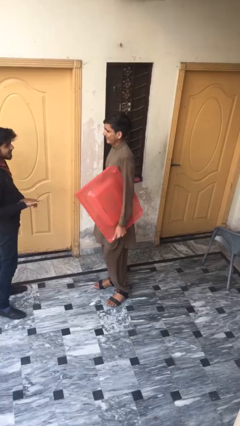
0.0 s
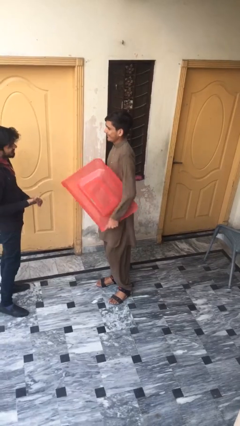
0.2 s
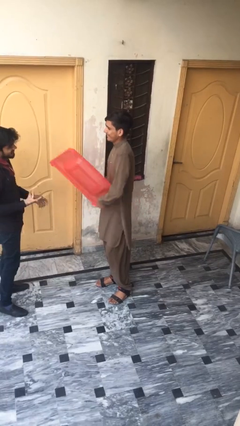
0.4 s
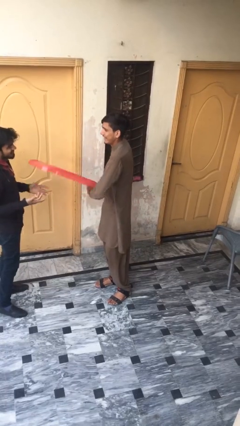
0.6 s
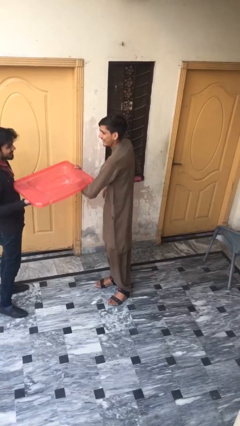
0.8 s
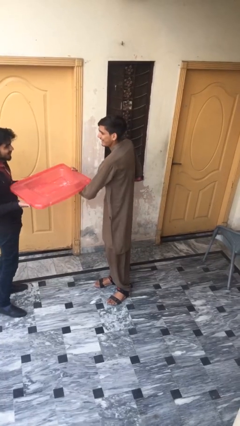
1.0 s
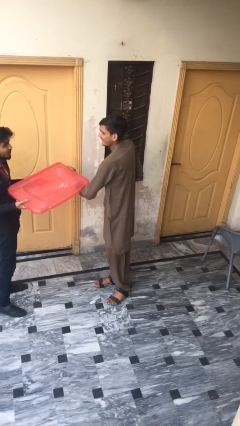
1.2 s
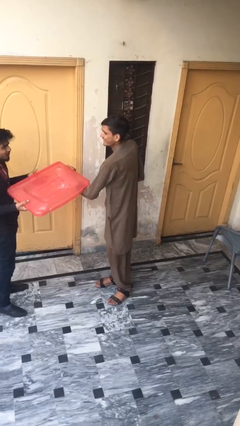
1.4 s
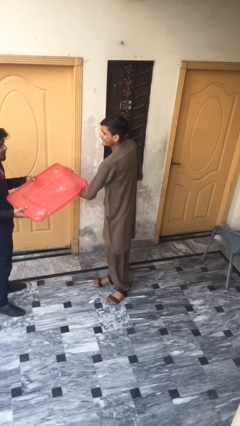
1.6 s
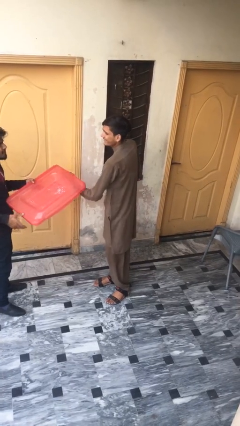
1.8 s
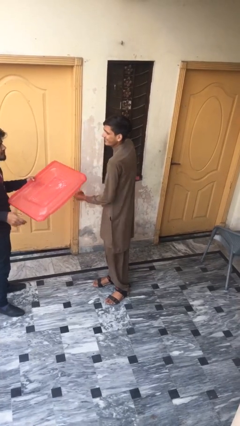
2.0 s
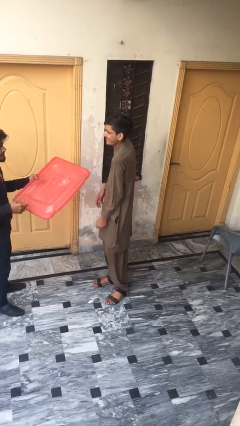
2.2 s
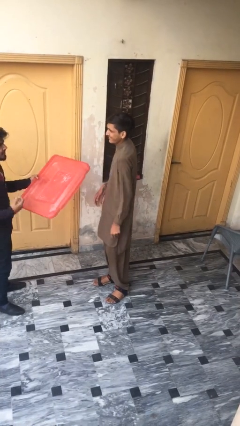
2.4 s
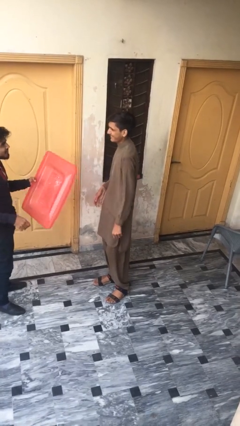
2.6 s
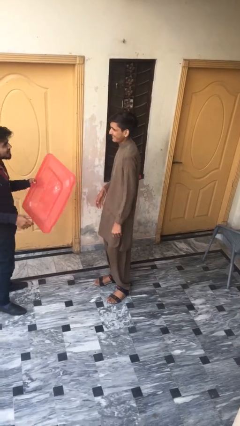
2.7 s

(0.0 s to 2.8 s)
person transfers object to person

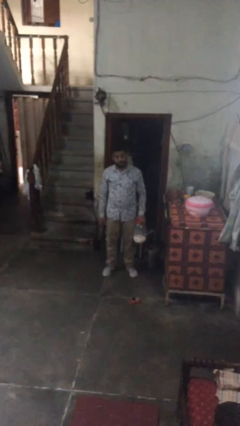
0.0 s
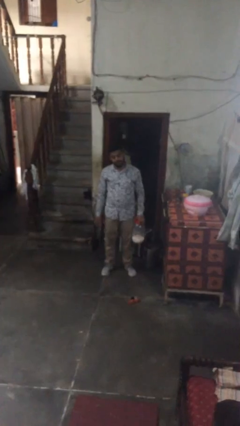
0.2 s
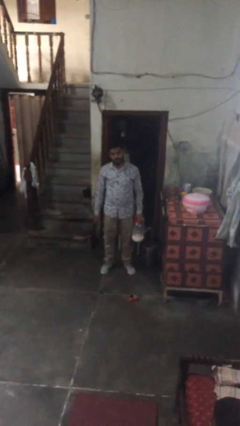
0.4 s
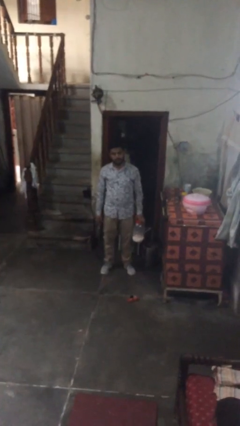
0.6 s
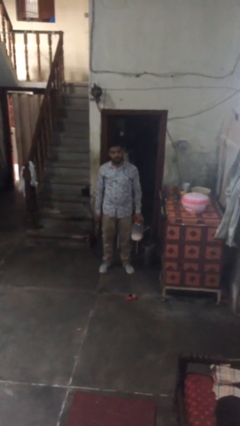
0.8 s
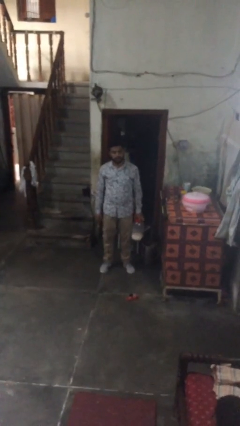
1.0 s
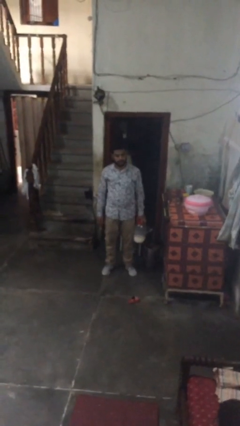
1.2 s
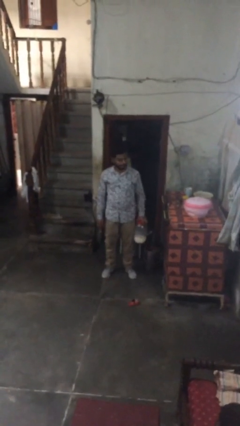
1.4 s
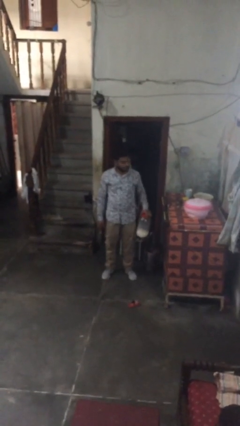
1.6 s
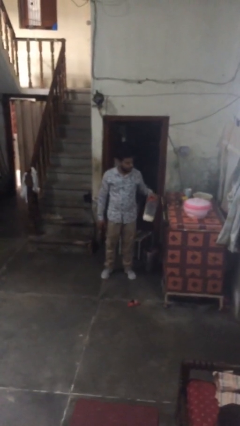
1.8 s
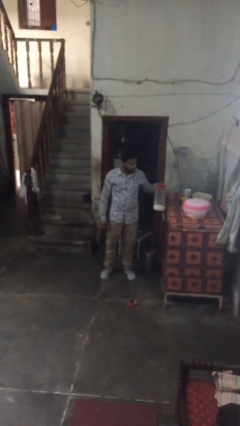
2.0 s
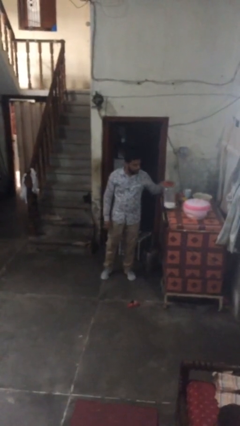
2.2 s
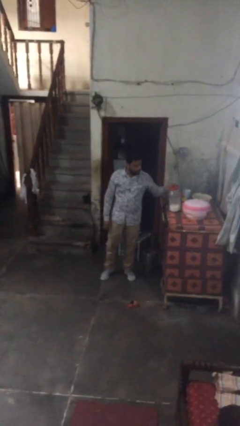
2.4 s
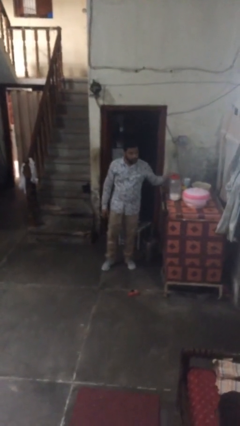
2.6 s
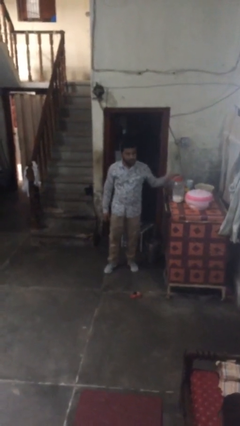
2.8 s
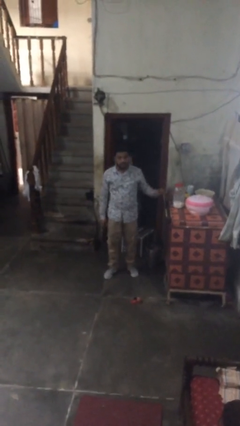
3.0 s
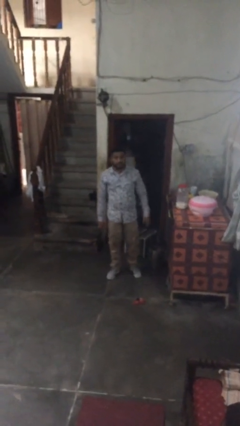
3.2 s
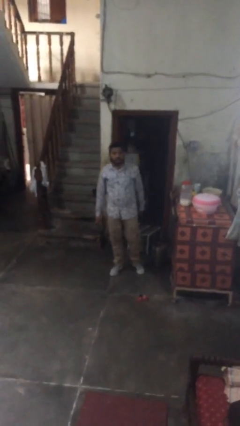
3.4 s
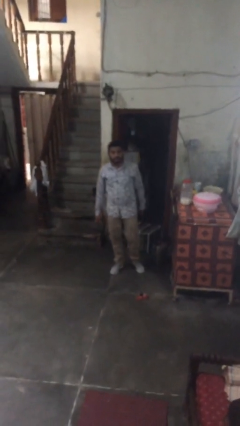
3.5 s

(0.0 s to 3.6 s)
person puts down object on table

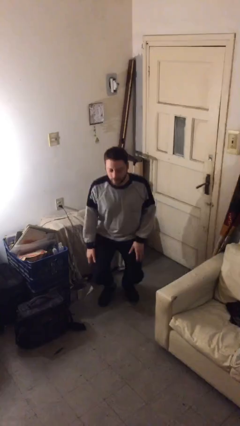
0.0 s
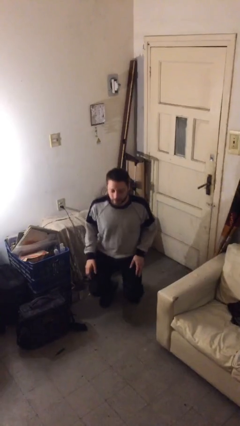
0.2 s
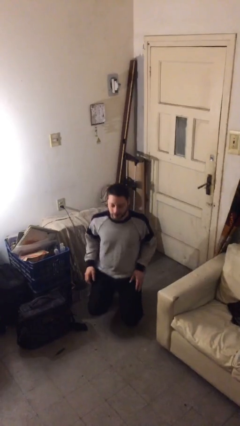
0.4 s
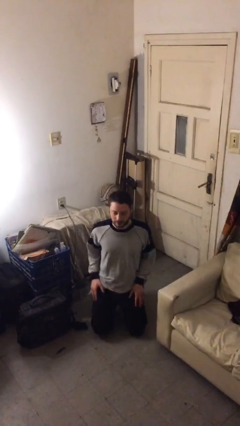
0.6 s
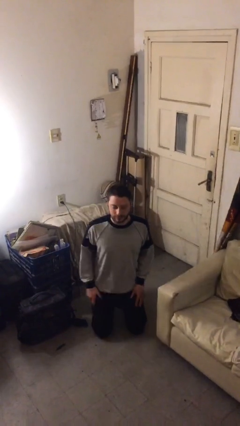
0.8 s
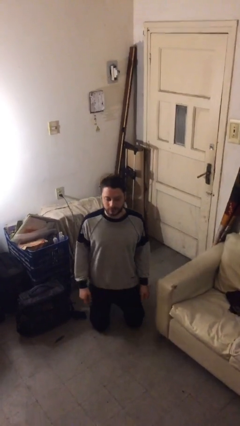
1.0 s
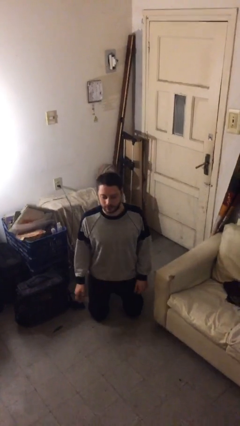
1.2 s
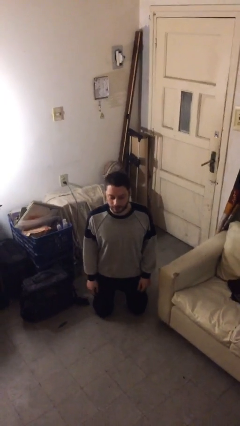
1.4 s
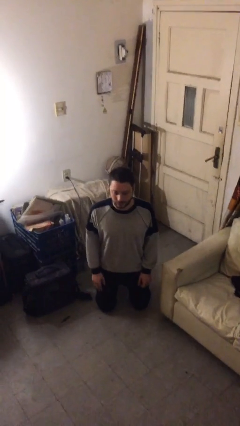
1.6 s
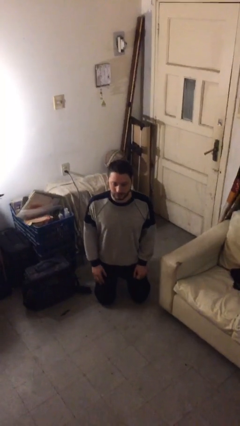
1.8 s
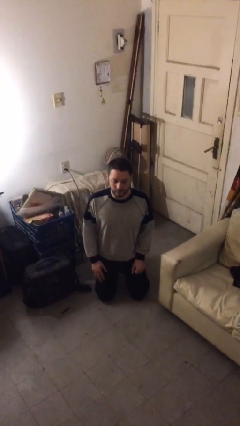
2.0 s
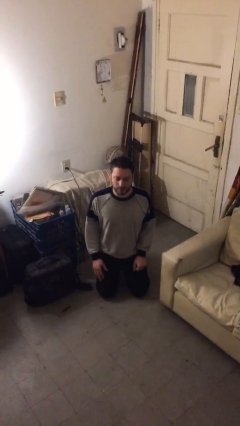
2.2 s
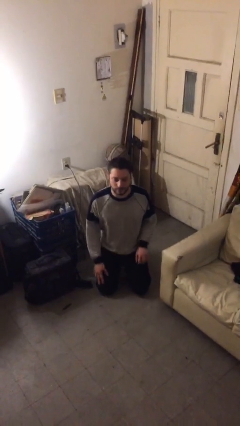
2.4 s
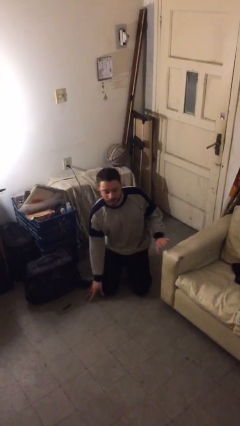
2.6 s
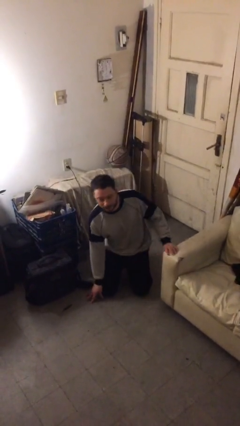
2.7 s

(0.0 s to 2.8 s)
person crawls

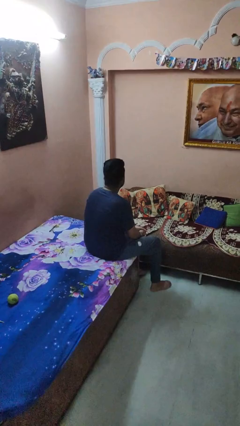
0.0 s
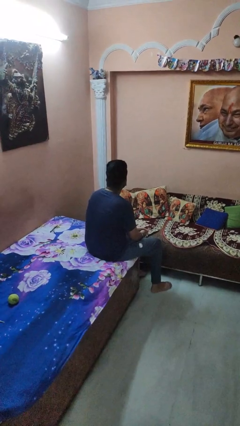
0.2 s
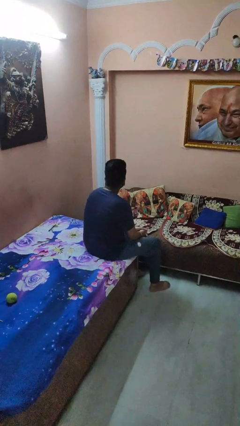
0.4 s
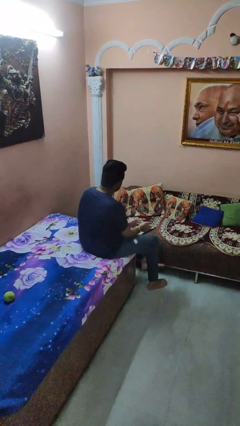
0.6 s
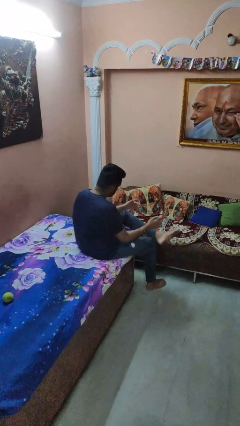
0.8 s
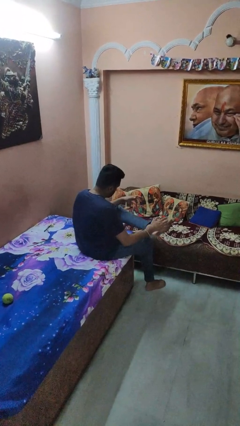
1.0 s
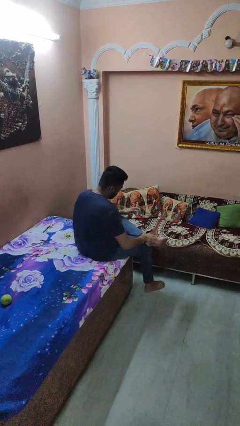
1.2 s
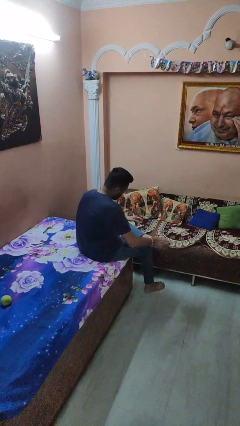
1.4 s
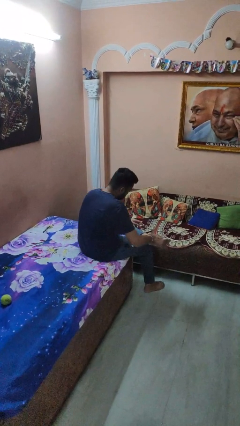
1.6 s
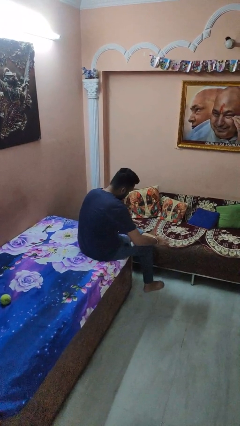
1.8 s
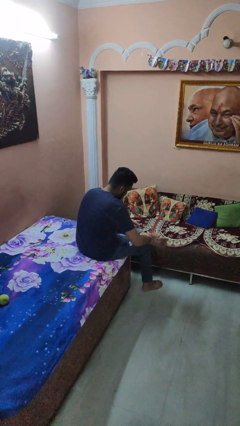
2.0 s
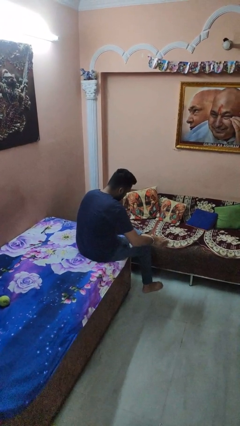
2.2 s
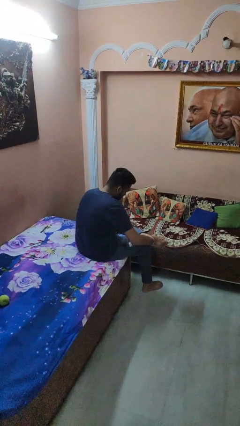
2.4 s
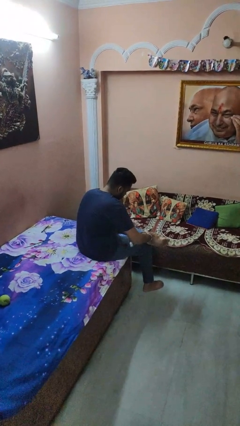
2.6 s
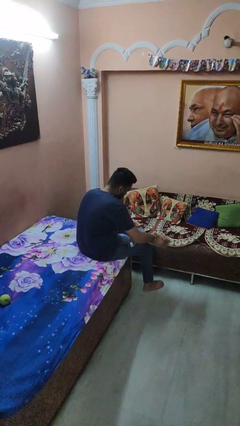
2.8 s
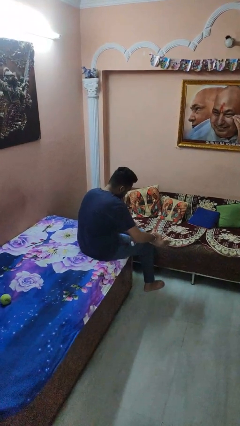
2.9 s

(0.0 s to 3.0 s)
person rubs foot

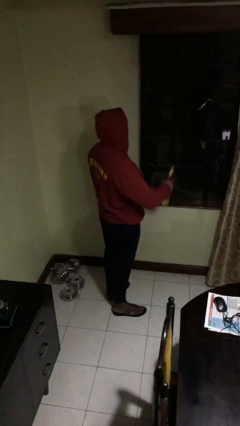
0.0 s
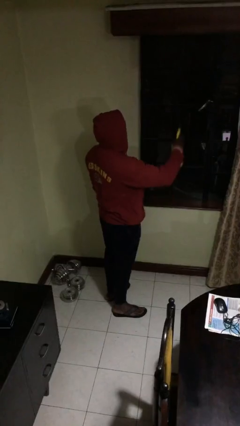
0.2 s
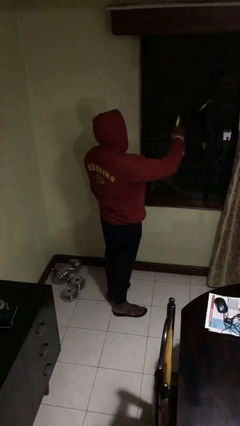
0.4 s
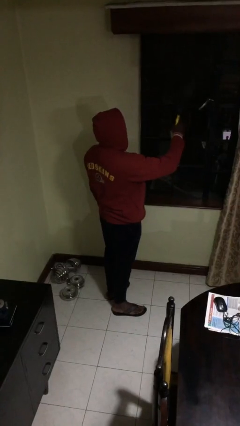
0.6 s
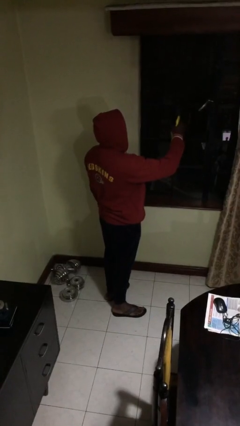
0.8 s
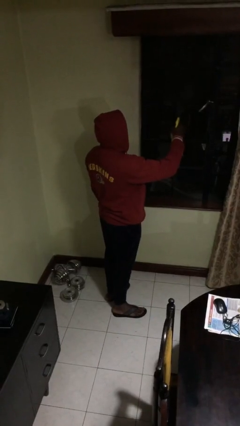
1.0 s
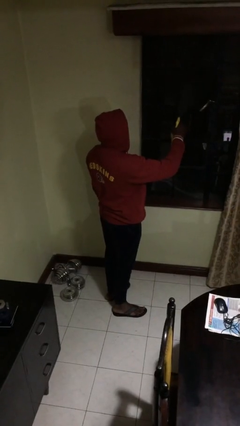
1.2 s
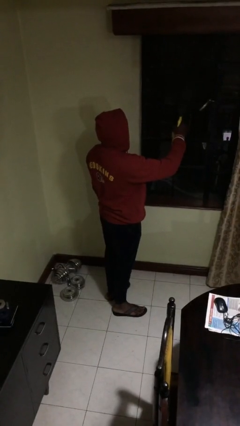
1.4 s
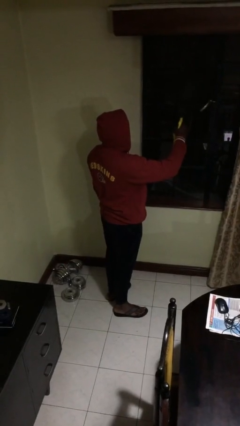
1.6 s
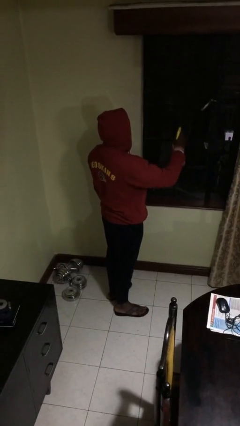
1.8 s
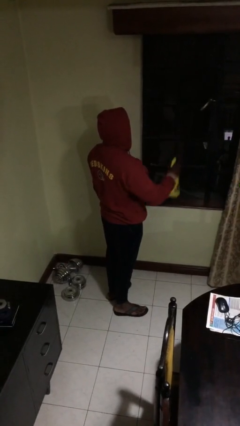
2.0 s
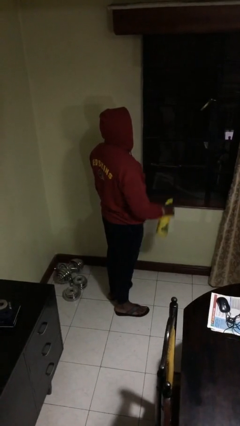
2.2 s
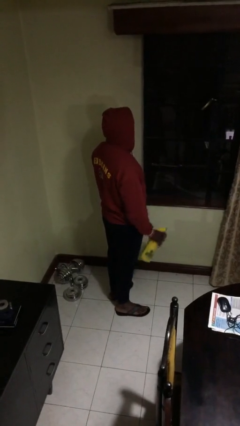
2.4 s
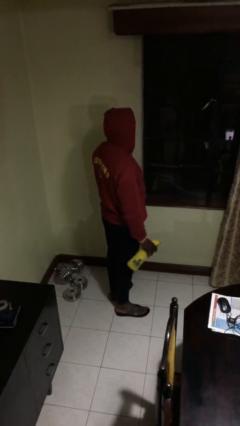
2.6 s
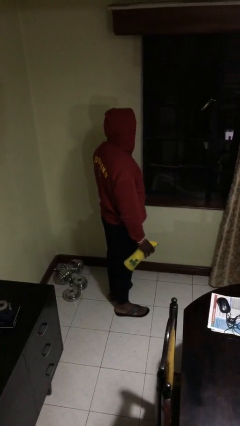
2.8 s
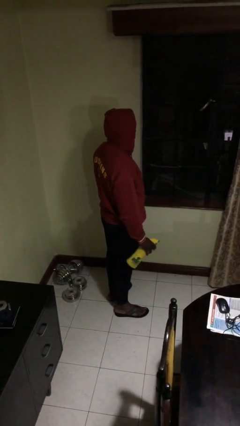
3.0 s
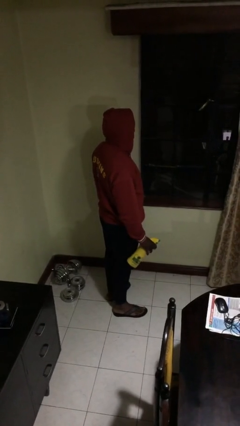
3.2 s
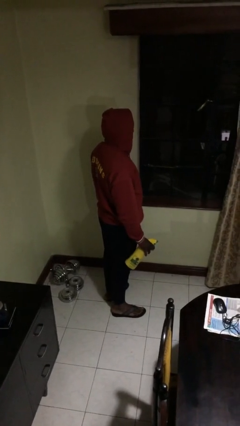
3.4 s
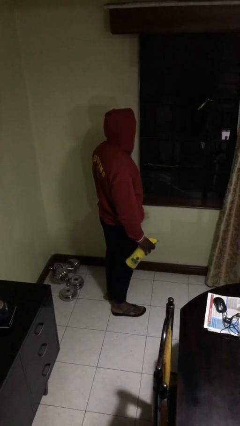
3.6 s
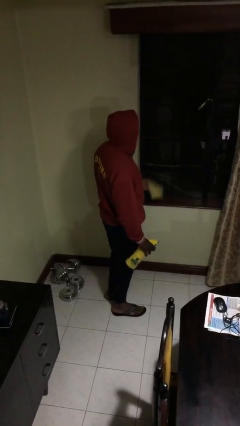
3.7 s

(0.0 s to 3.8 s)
person sprays from bottle

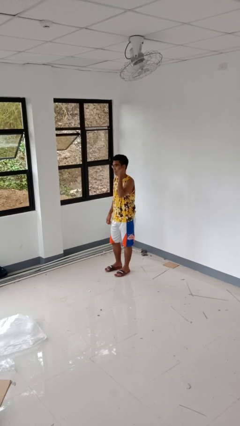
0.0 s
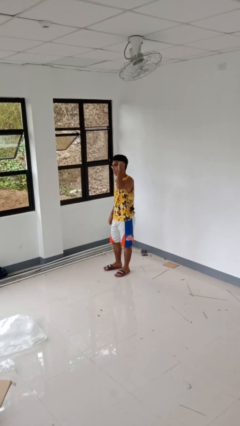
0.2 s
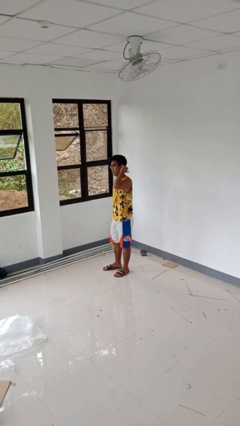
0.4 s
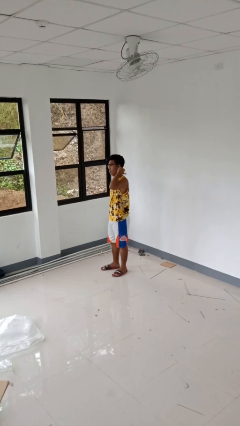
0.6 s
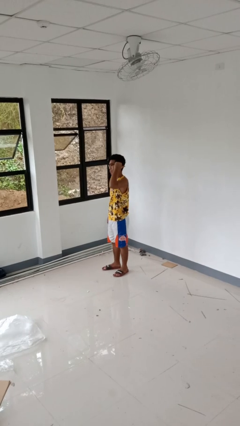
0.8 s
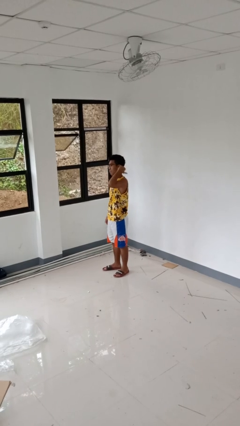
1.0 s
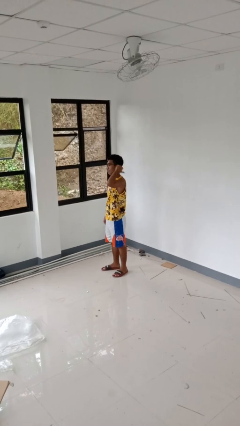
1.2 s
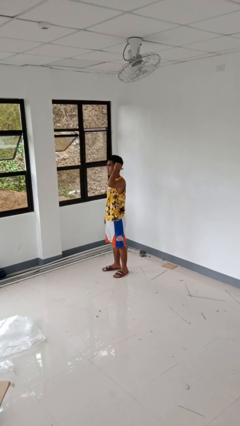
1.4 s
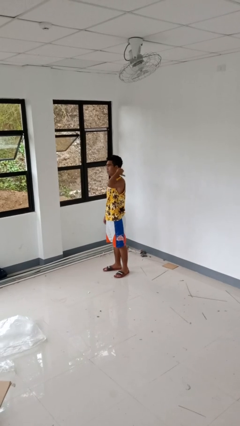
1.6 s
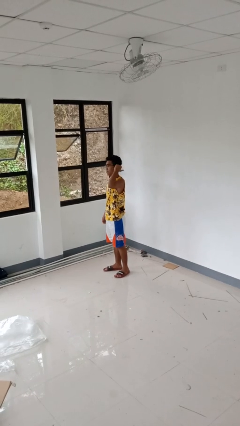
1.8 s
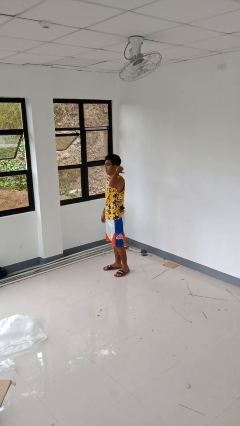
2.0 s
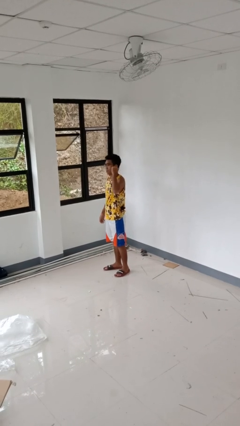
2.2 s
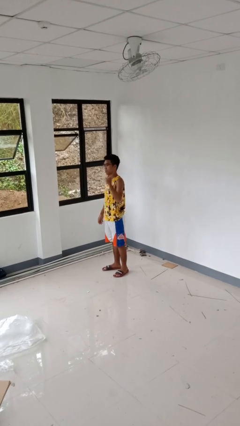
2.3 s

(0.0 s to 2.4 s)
person gestures behind me
